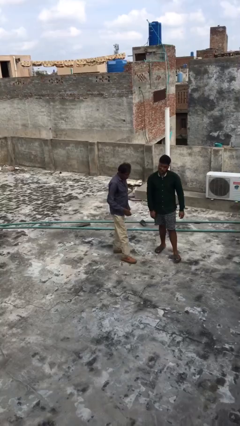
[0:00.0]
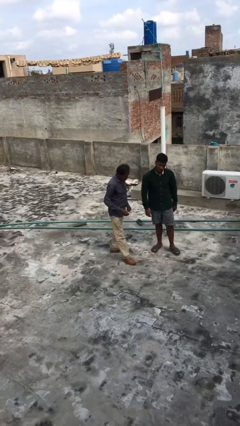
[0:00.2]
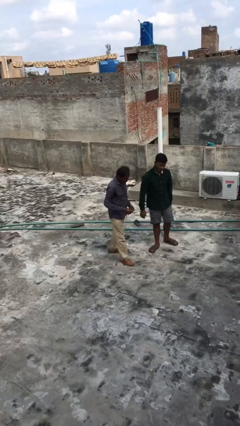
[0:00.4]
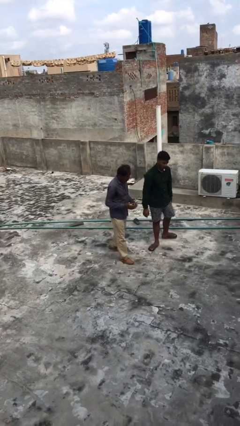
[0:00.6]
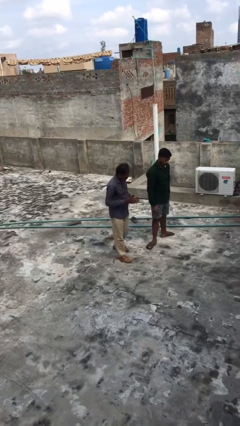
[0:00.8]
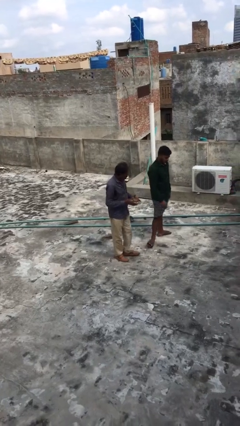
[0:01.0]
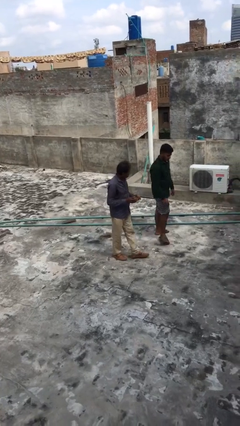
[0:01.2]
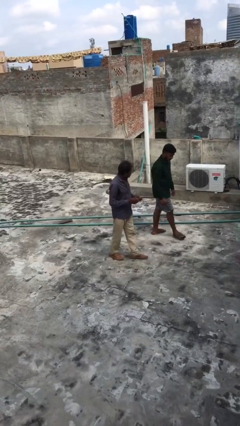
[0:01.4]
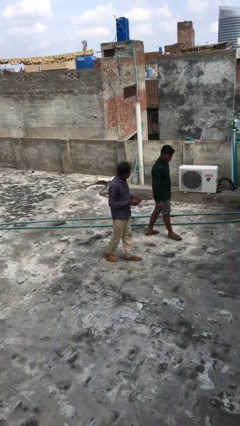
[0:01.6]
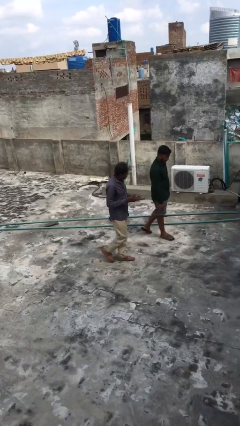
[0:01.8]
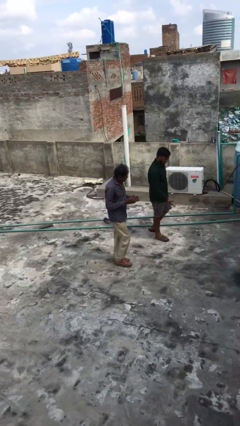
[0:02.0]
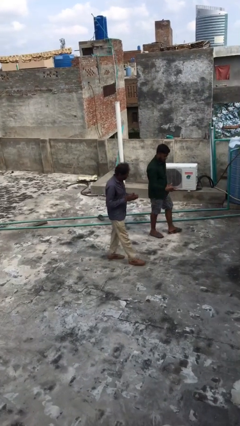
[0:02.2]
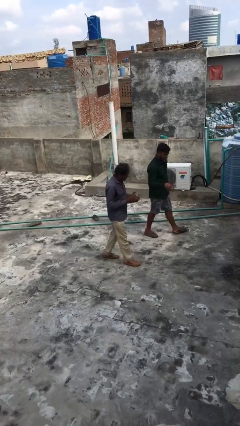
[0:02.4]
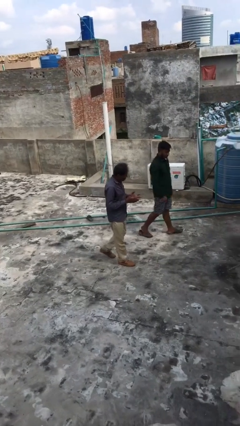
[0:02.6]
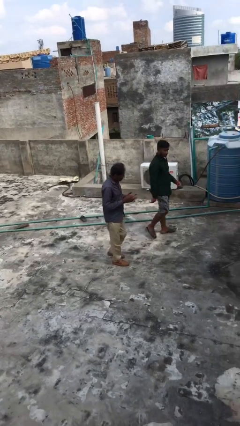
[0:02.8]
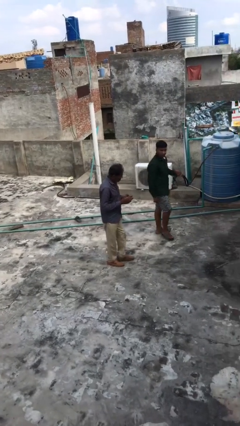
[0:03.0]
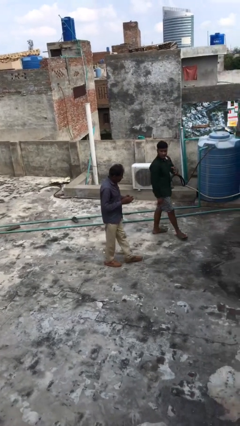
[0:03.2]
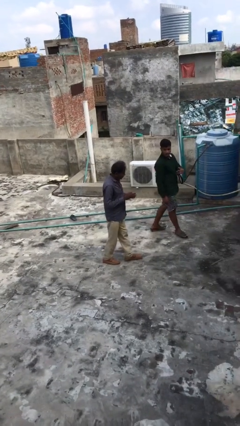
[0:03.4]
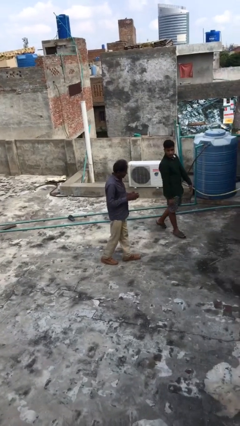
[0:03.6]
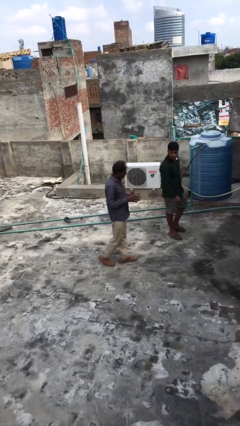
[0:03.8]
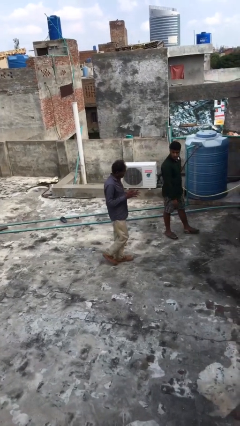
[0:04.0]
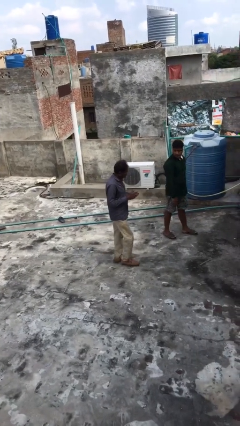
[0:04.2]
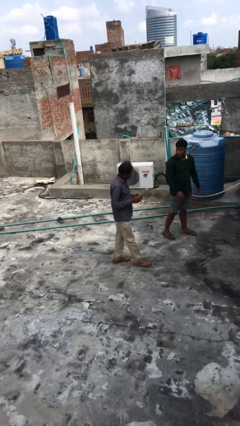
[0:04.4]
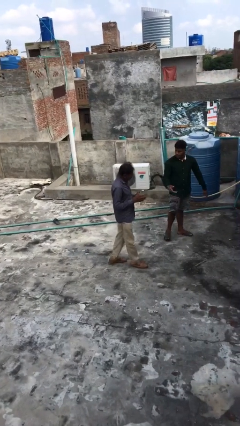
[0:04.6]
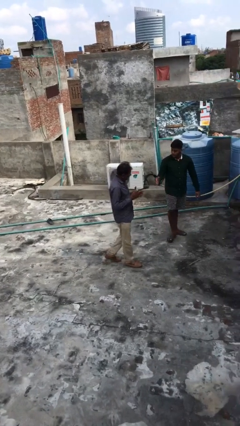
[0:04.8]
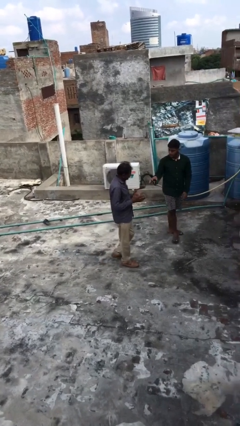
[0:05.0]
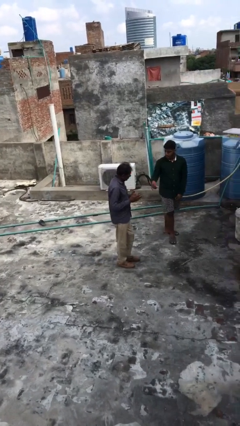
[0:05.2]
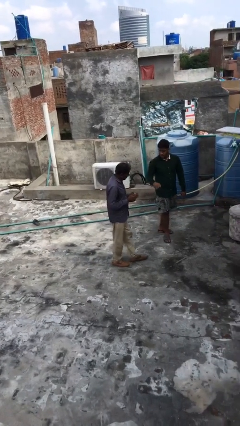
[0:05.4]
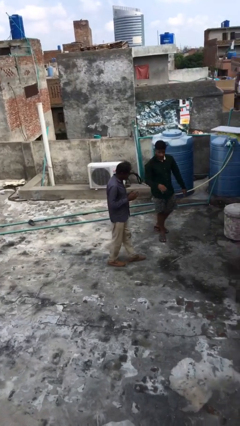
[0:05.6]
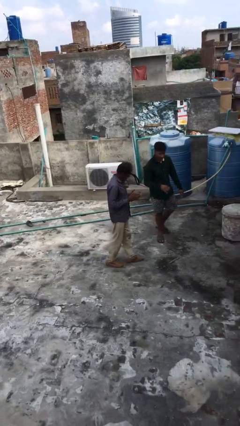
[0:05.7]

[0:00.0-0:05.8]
person talks to person

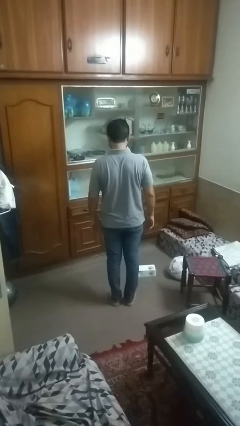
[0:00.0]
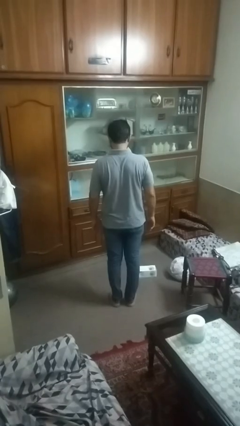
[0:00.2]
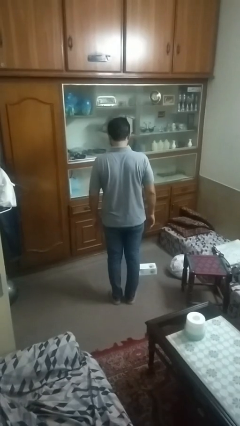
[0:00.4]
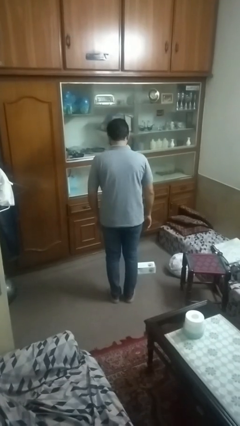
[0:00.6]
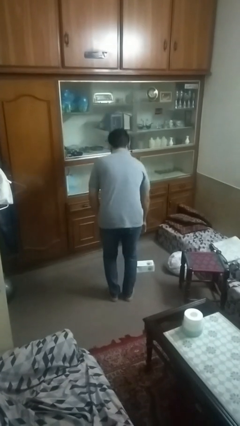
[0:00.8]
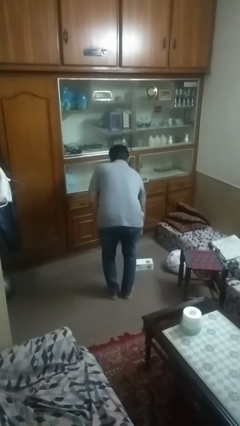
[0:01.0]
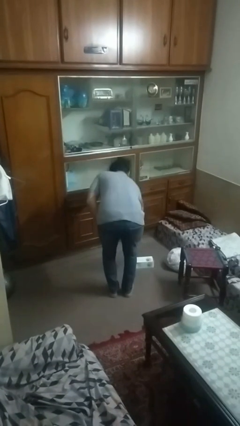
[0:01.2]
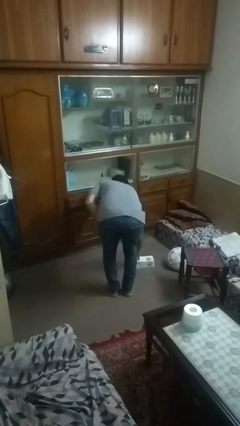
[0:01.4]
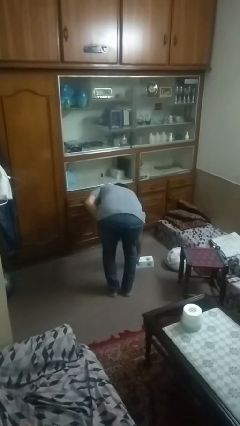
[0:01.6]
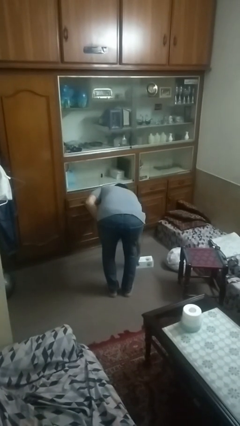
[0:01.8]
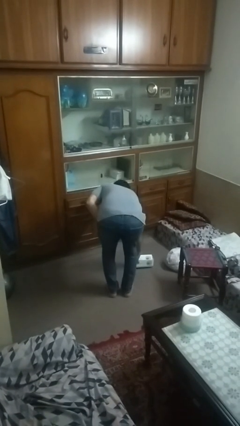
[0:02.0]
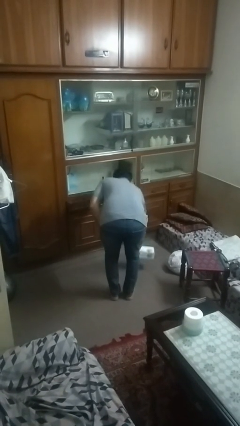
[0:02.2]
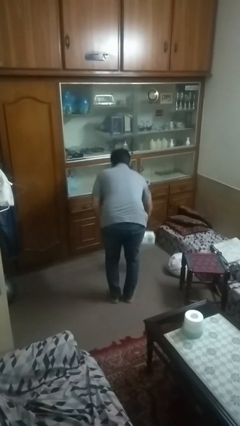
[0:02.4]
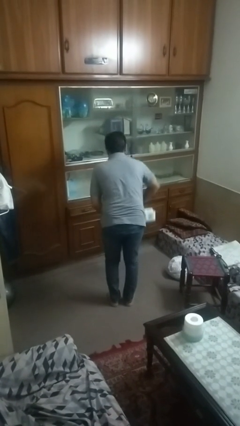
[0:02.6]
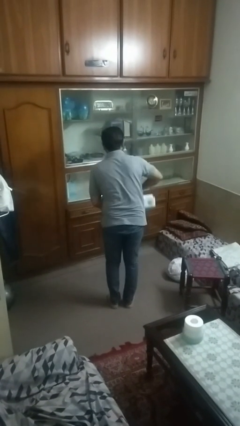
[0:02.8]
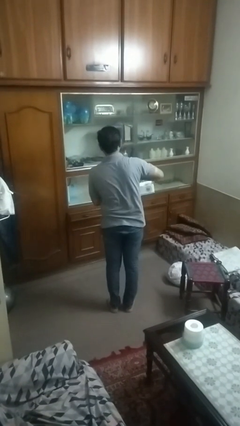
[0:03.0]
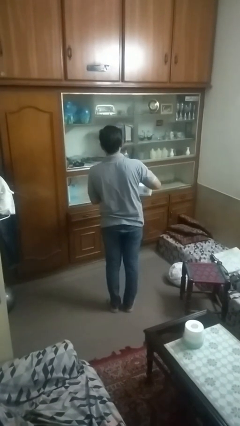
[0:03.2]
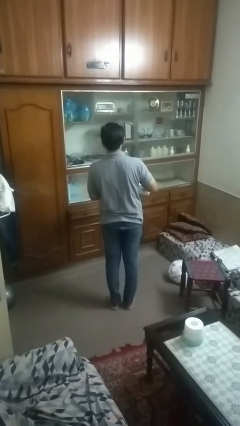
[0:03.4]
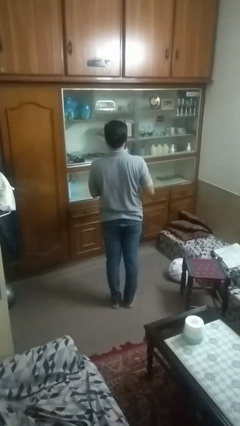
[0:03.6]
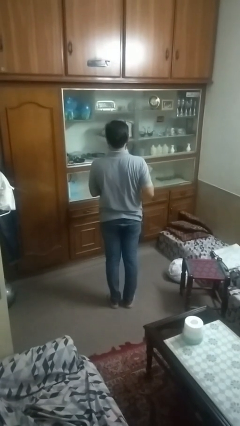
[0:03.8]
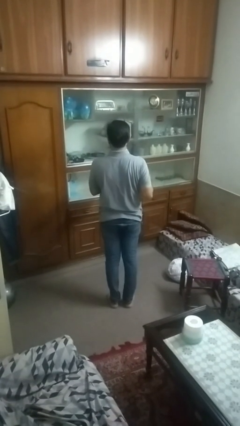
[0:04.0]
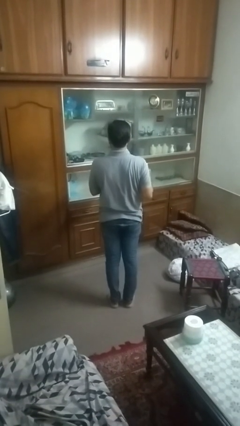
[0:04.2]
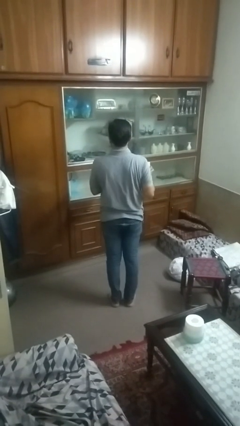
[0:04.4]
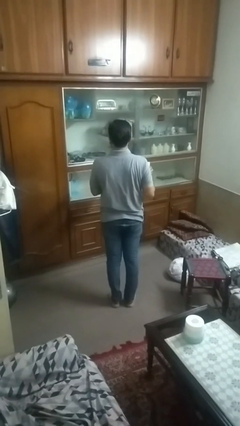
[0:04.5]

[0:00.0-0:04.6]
person picks up object from floor

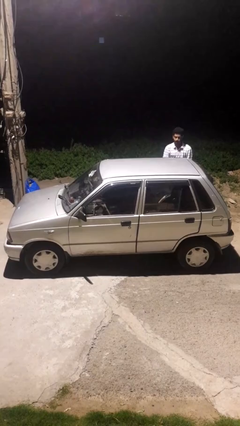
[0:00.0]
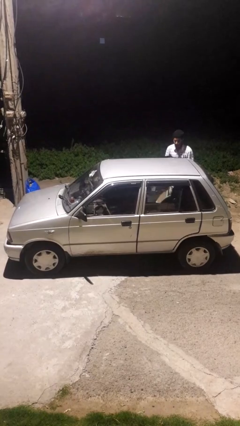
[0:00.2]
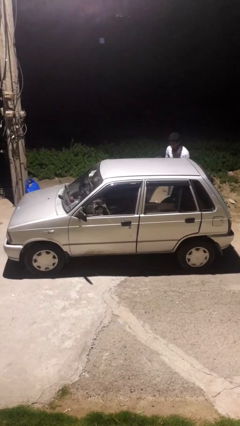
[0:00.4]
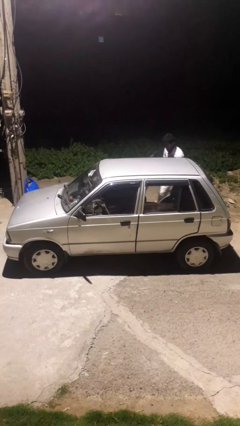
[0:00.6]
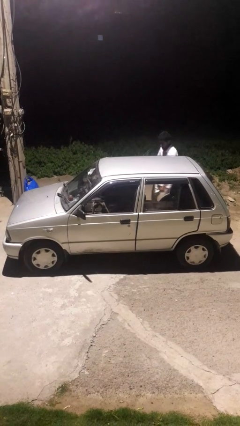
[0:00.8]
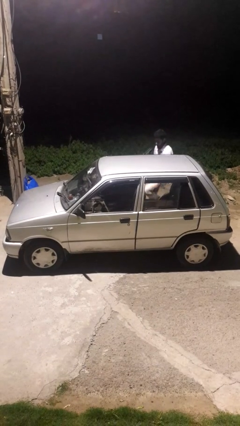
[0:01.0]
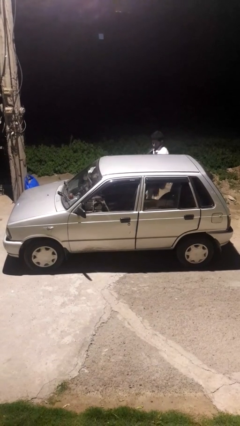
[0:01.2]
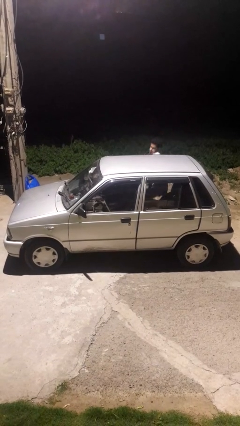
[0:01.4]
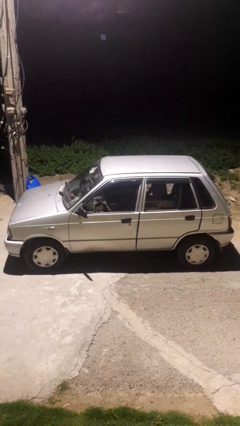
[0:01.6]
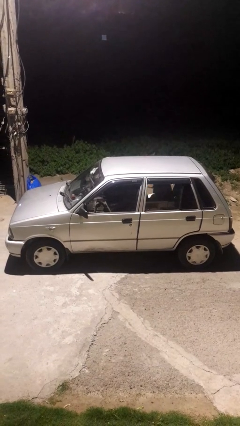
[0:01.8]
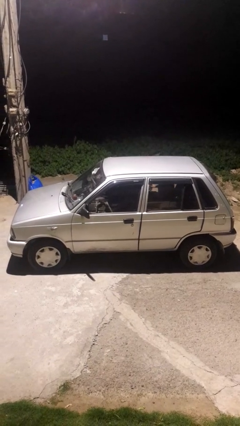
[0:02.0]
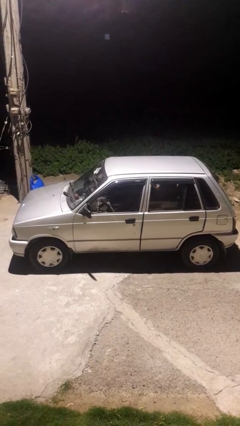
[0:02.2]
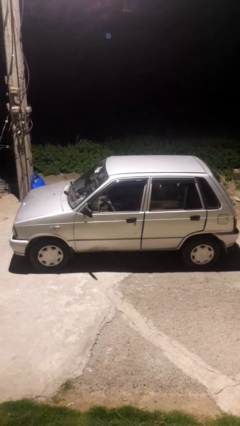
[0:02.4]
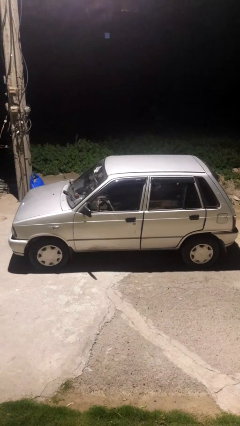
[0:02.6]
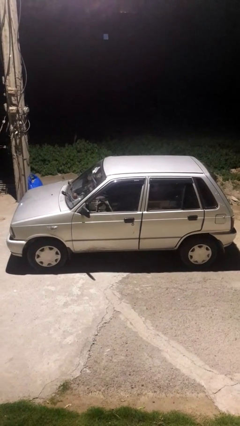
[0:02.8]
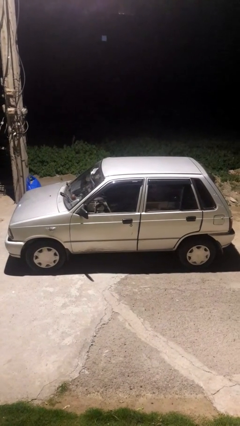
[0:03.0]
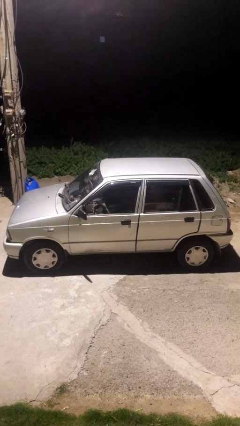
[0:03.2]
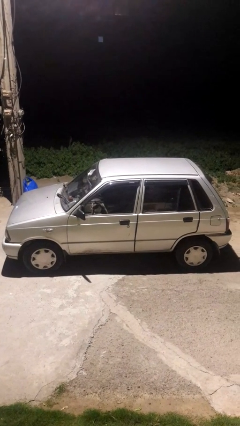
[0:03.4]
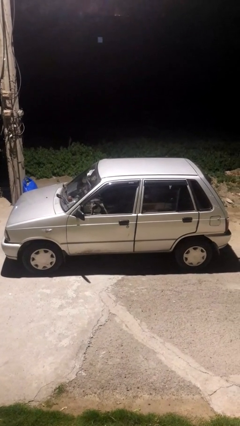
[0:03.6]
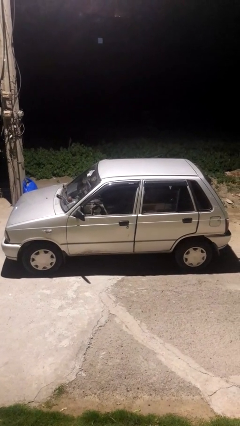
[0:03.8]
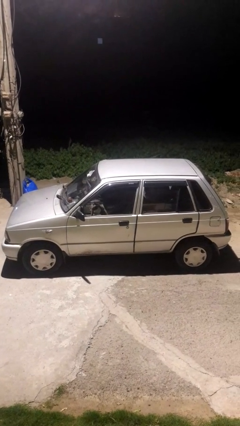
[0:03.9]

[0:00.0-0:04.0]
car picks up person

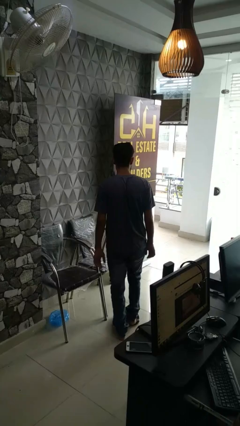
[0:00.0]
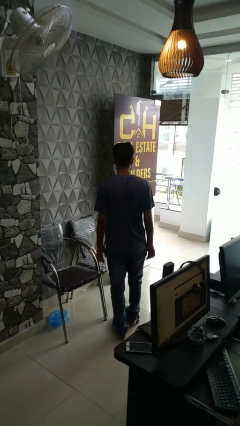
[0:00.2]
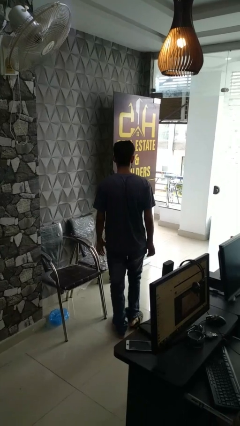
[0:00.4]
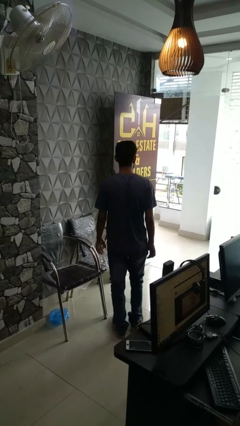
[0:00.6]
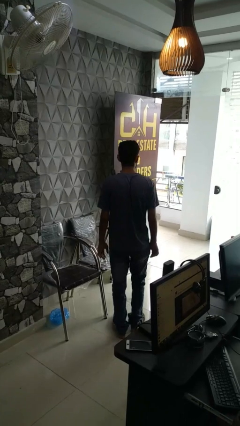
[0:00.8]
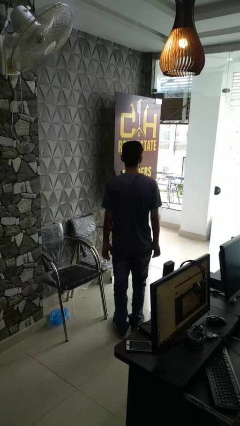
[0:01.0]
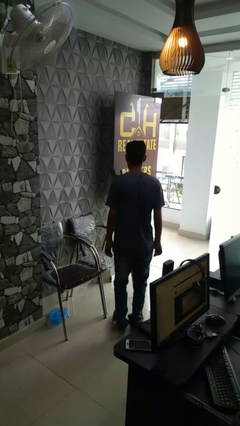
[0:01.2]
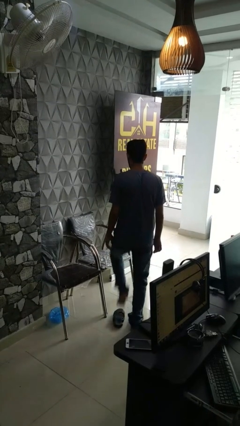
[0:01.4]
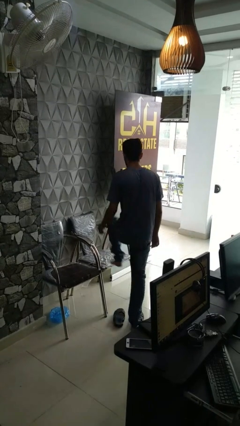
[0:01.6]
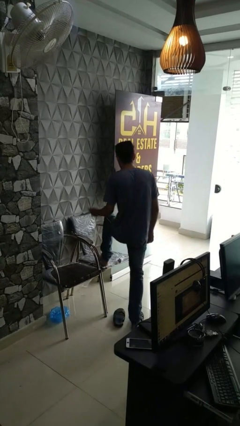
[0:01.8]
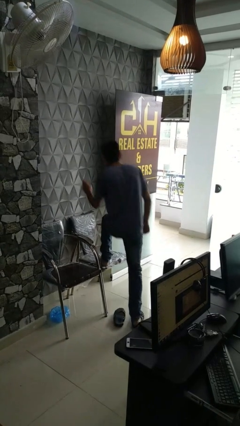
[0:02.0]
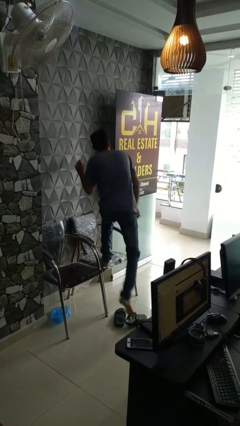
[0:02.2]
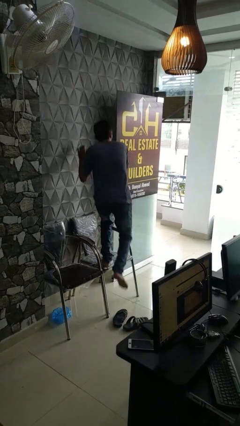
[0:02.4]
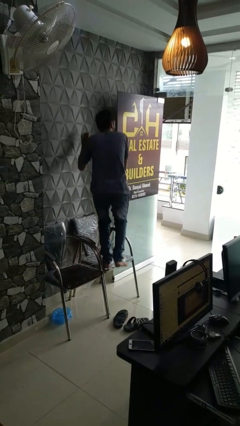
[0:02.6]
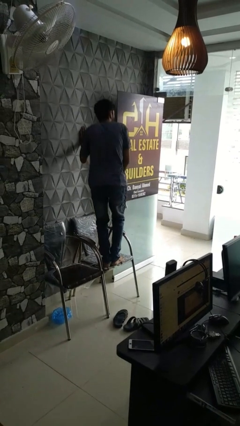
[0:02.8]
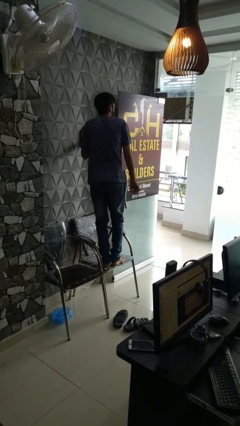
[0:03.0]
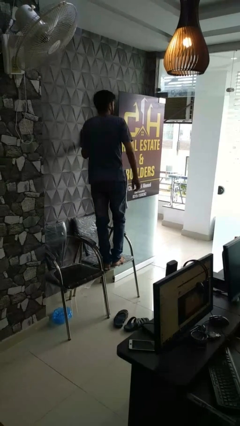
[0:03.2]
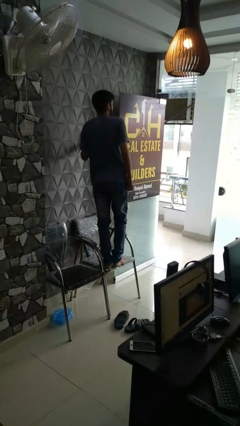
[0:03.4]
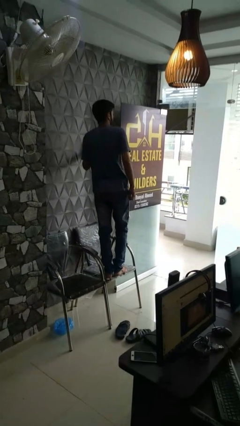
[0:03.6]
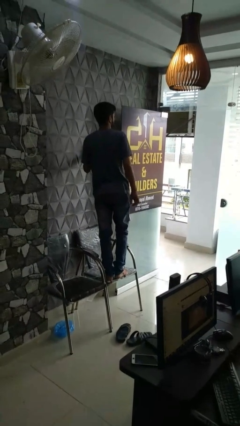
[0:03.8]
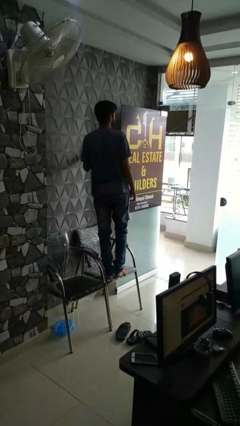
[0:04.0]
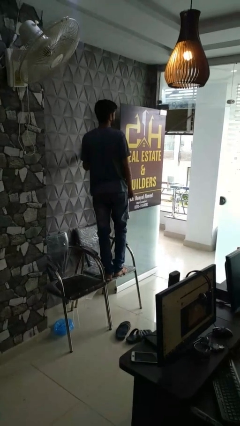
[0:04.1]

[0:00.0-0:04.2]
person climbs on chair
